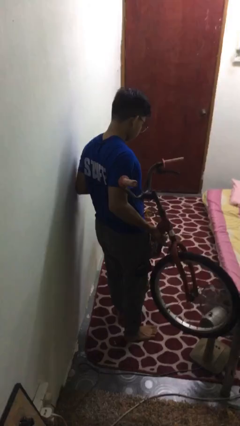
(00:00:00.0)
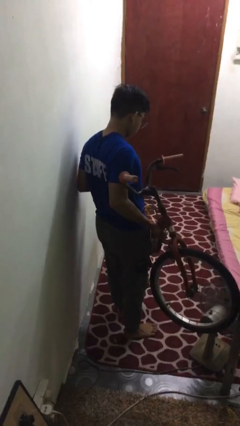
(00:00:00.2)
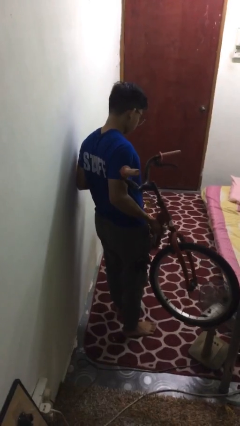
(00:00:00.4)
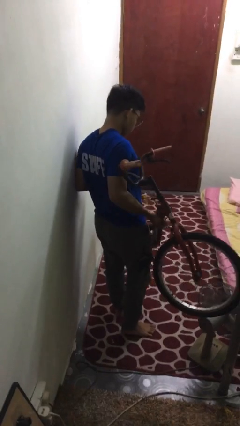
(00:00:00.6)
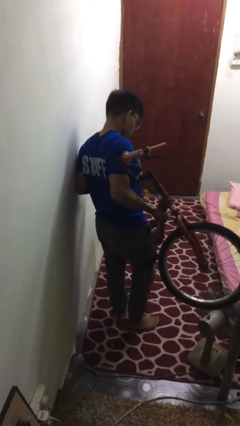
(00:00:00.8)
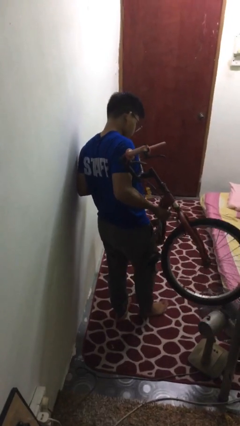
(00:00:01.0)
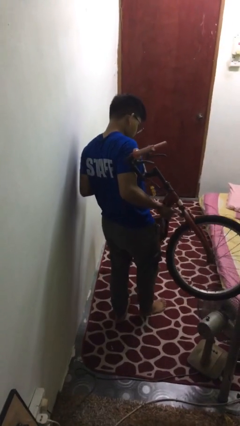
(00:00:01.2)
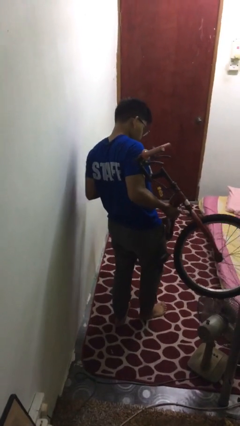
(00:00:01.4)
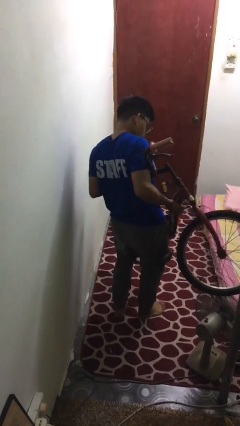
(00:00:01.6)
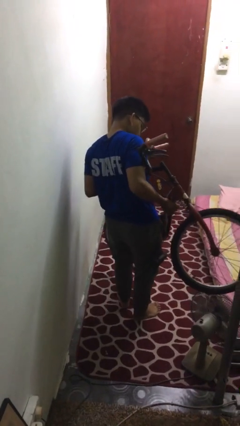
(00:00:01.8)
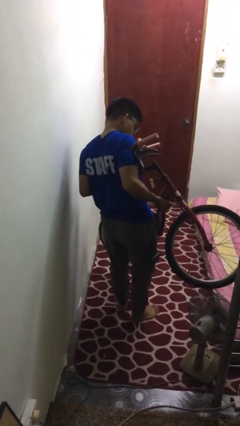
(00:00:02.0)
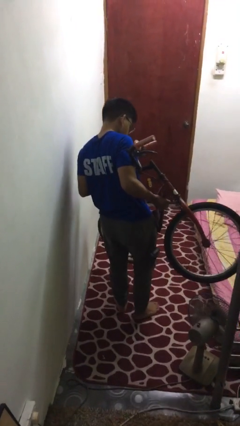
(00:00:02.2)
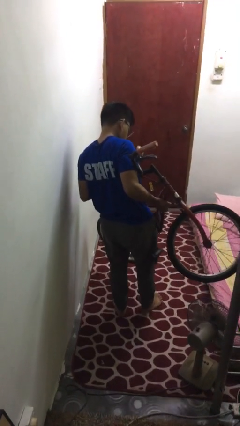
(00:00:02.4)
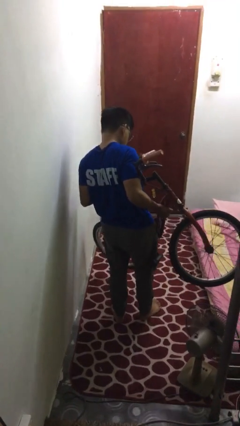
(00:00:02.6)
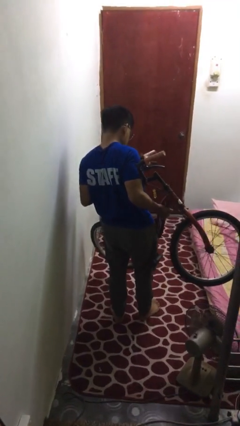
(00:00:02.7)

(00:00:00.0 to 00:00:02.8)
person carries bicycle

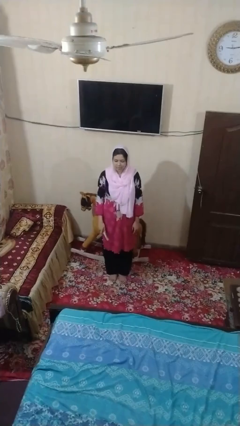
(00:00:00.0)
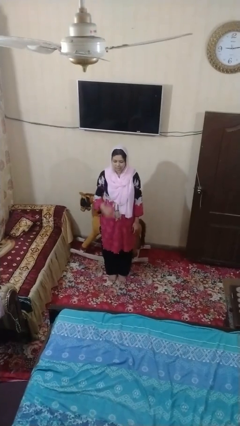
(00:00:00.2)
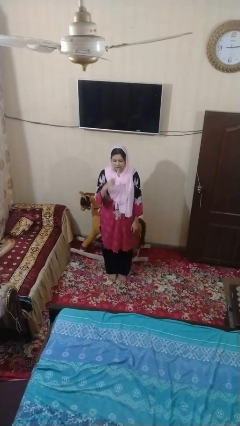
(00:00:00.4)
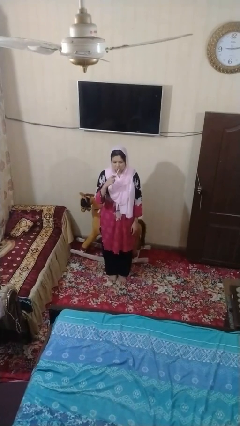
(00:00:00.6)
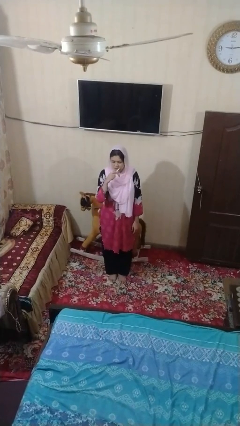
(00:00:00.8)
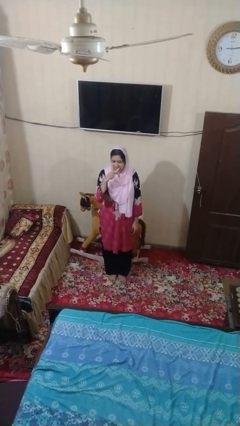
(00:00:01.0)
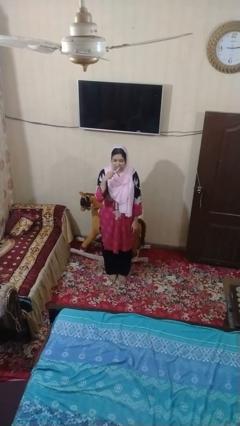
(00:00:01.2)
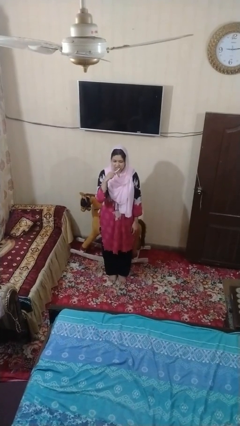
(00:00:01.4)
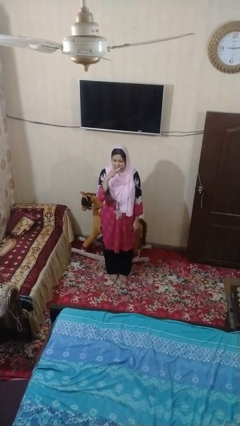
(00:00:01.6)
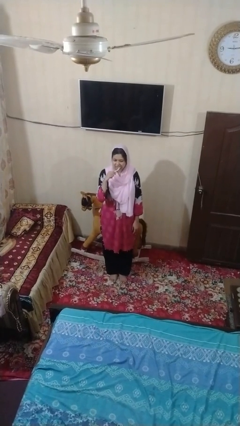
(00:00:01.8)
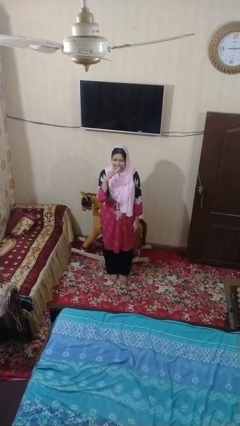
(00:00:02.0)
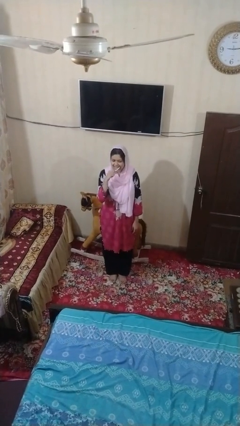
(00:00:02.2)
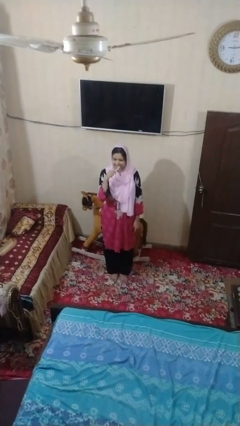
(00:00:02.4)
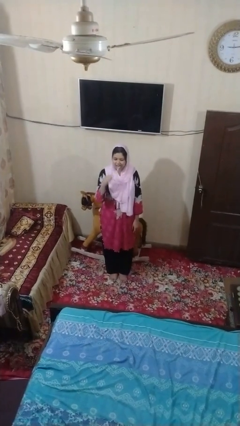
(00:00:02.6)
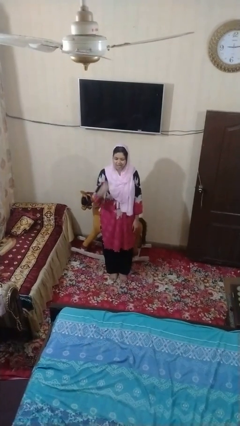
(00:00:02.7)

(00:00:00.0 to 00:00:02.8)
person brushes teeth

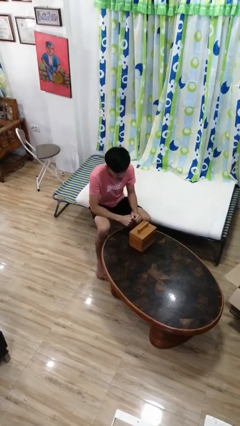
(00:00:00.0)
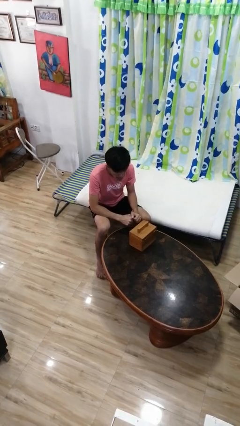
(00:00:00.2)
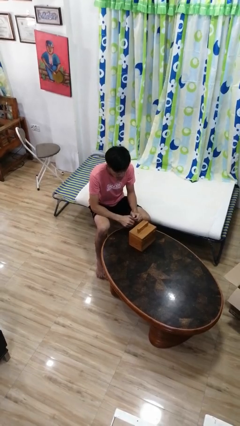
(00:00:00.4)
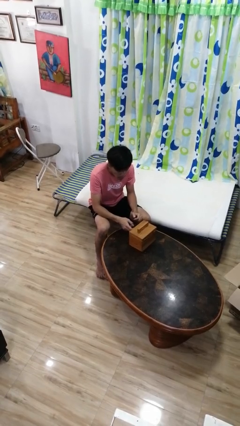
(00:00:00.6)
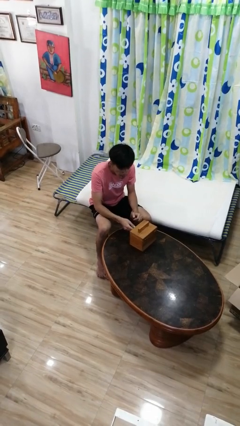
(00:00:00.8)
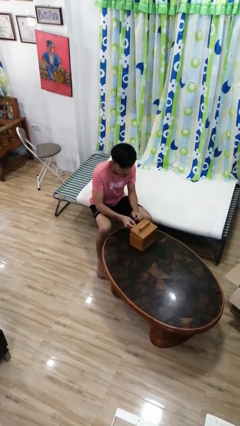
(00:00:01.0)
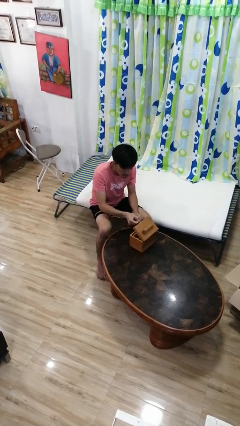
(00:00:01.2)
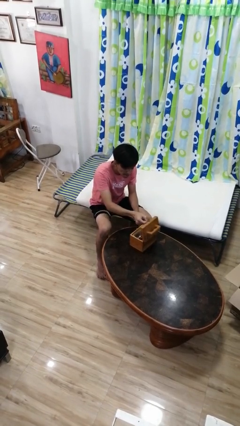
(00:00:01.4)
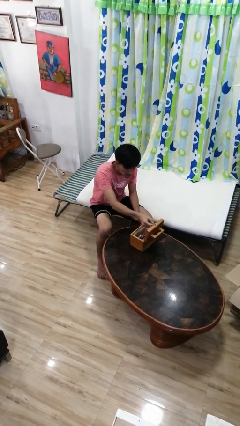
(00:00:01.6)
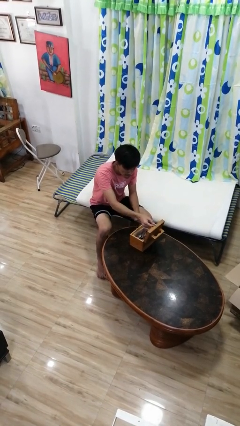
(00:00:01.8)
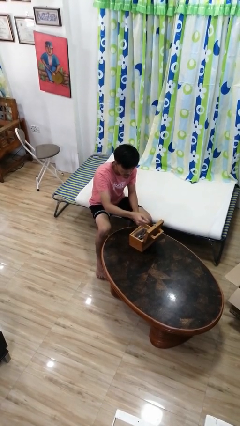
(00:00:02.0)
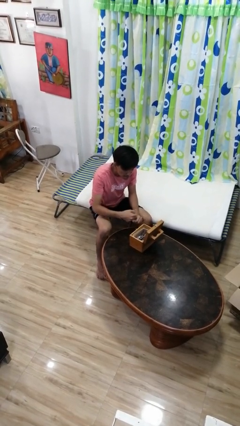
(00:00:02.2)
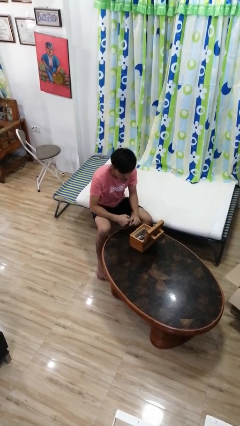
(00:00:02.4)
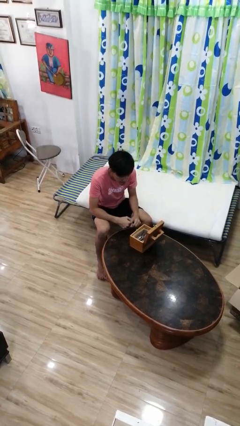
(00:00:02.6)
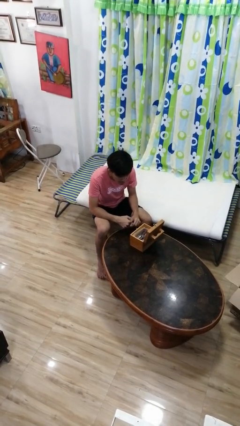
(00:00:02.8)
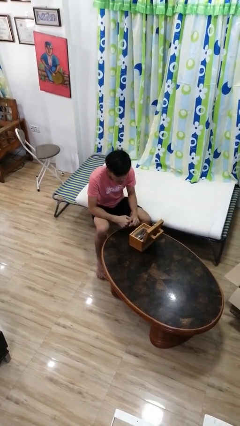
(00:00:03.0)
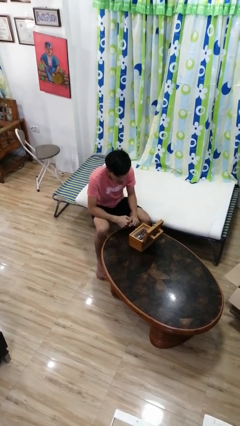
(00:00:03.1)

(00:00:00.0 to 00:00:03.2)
person opens jewelry box

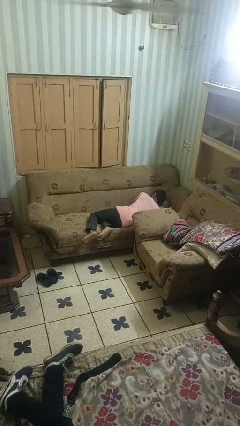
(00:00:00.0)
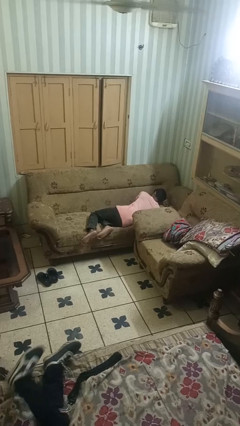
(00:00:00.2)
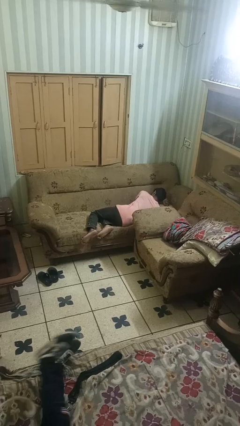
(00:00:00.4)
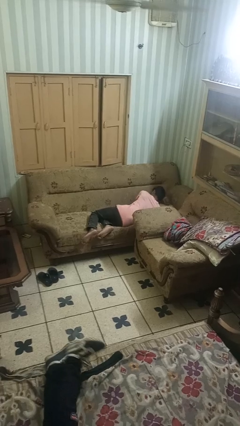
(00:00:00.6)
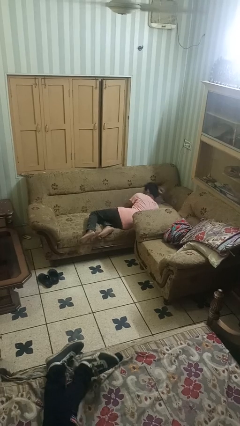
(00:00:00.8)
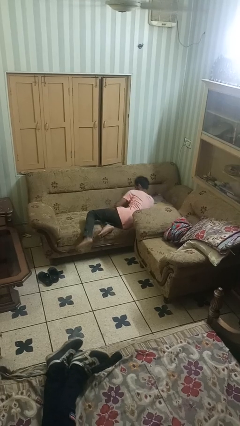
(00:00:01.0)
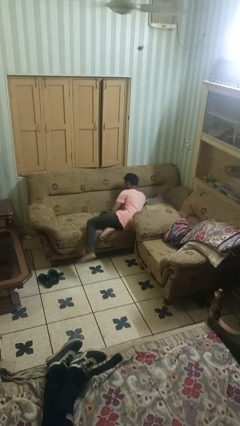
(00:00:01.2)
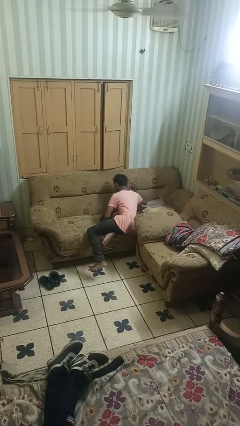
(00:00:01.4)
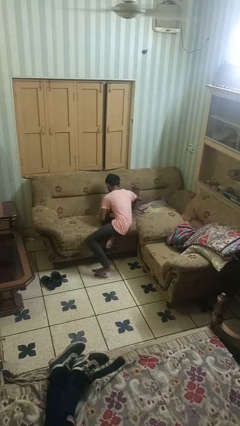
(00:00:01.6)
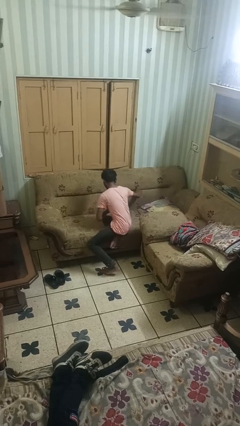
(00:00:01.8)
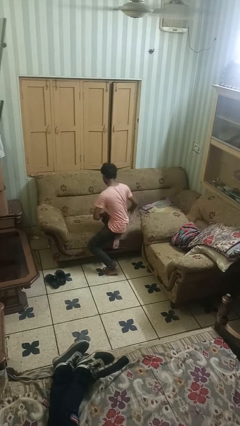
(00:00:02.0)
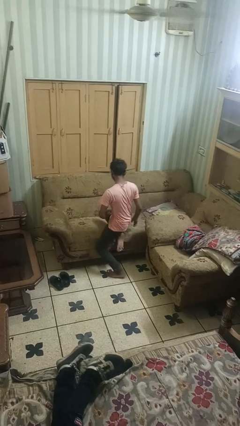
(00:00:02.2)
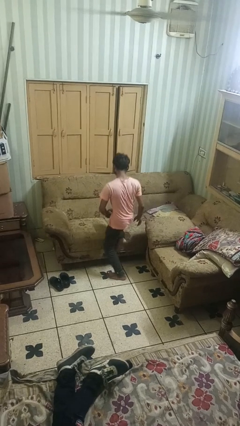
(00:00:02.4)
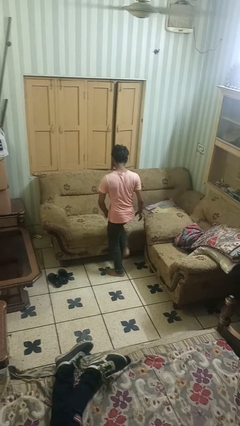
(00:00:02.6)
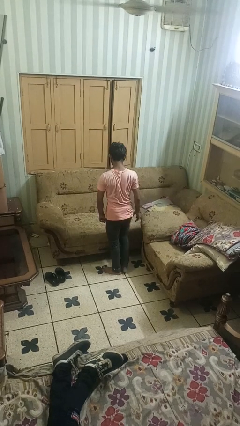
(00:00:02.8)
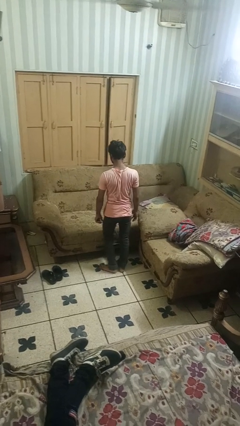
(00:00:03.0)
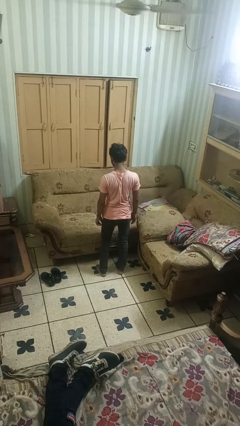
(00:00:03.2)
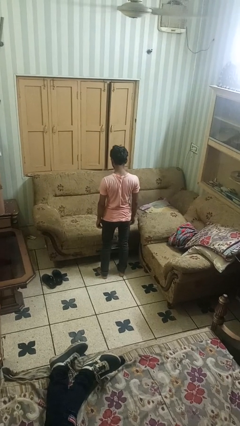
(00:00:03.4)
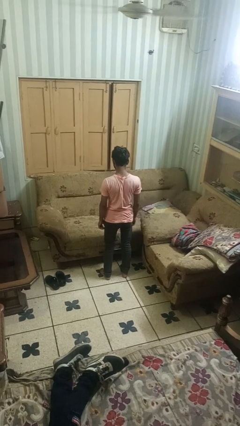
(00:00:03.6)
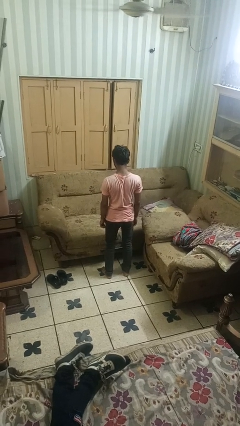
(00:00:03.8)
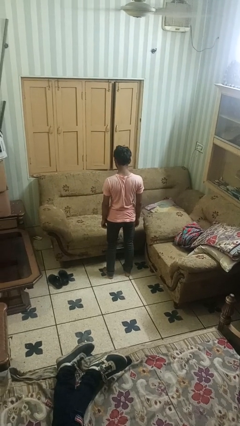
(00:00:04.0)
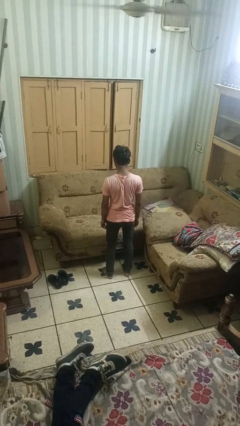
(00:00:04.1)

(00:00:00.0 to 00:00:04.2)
person stands up

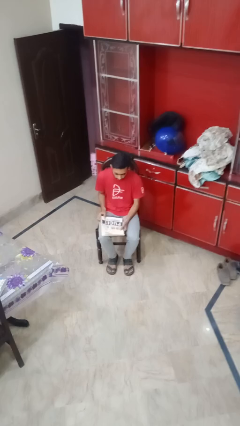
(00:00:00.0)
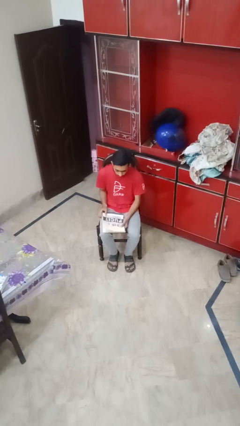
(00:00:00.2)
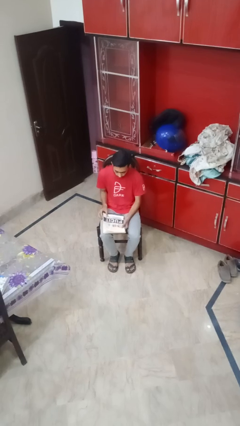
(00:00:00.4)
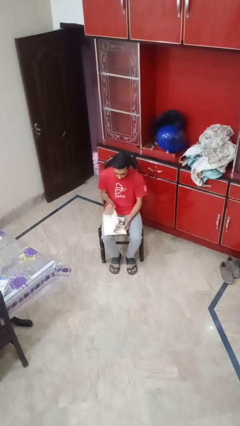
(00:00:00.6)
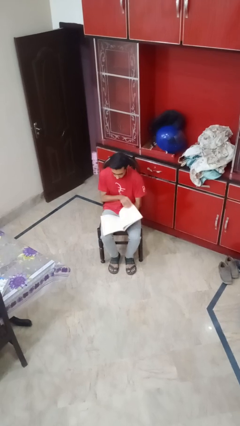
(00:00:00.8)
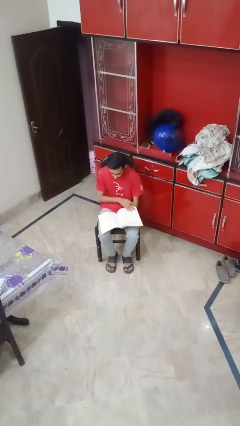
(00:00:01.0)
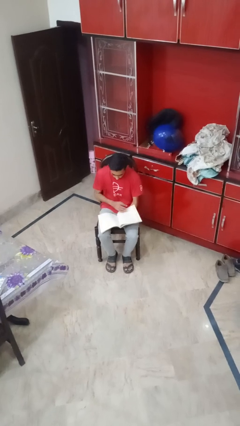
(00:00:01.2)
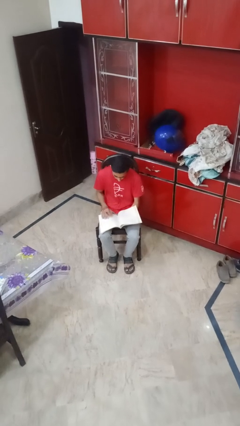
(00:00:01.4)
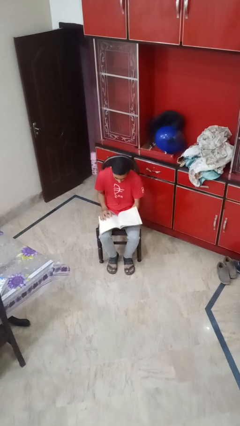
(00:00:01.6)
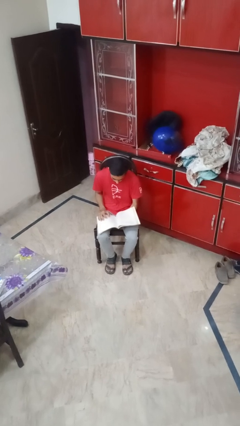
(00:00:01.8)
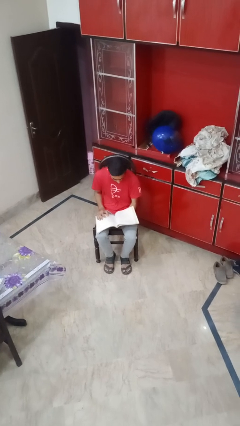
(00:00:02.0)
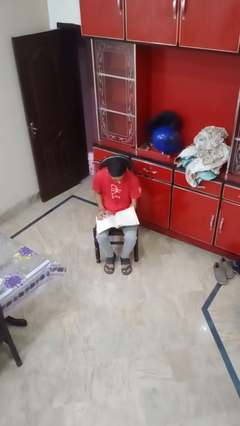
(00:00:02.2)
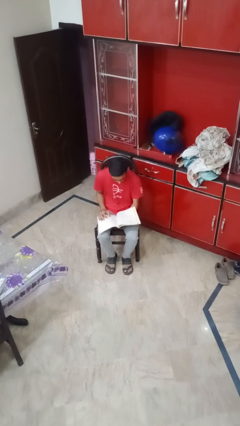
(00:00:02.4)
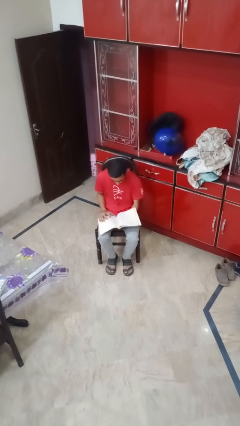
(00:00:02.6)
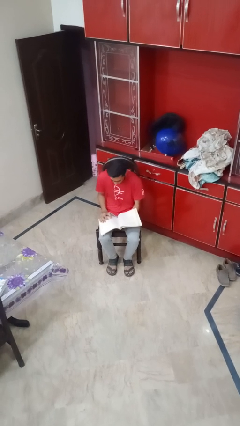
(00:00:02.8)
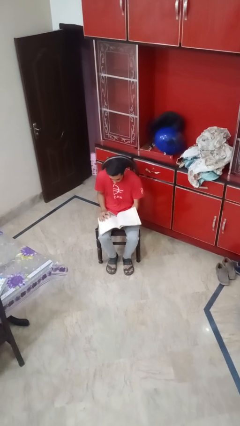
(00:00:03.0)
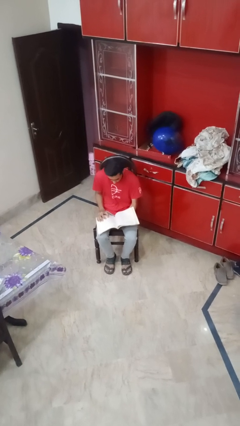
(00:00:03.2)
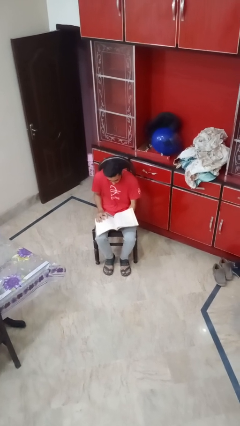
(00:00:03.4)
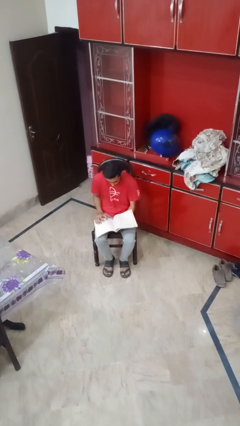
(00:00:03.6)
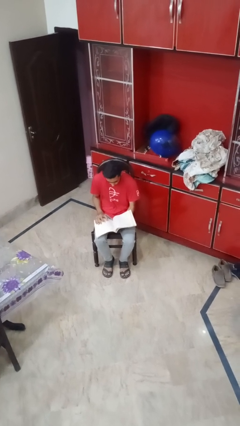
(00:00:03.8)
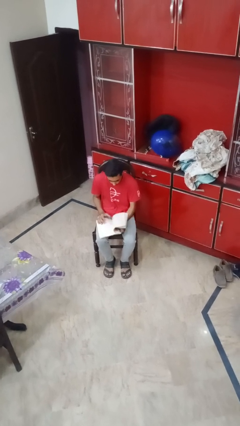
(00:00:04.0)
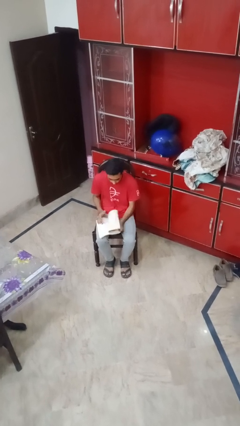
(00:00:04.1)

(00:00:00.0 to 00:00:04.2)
person reads magazine
